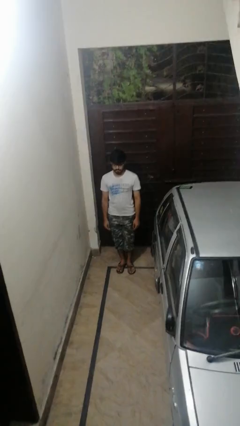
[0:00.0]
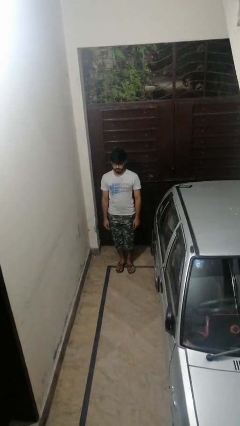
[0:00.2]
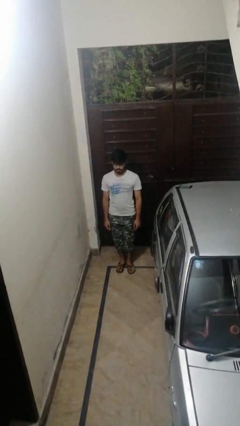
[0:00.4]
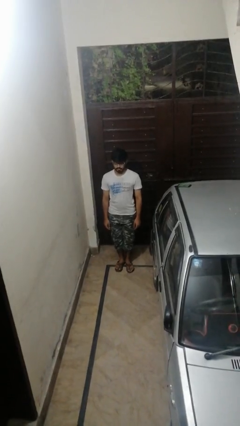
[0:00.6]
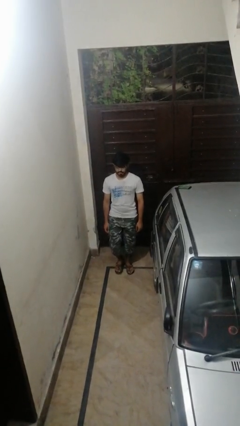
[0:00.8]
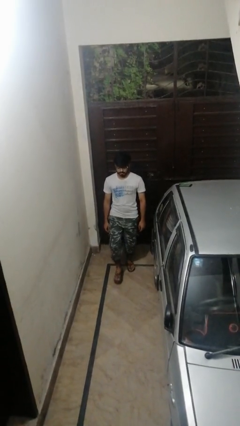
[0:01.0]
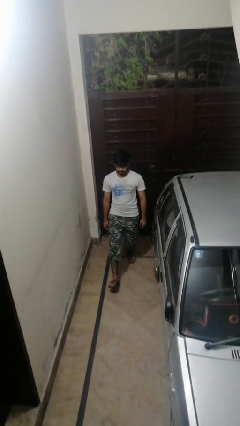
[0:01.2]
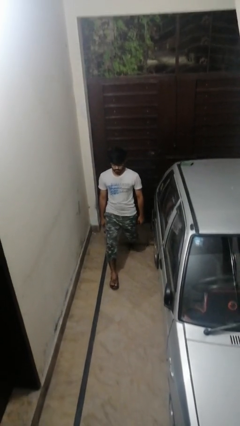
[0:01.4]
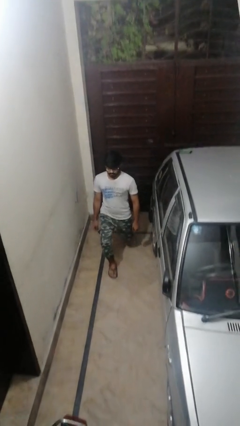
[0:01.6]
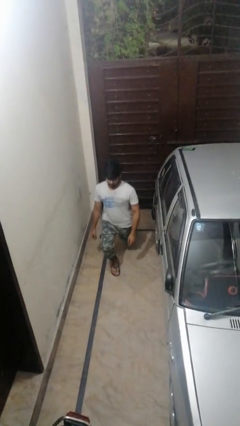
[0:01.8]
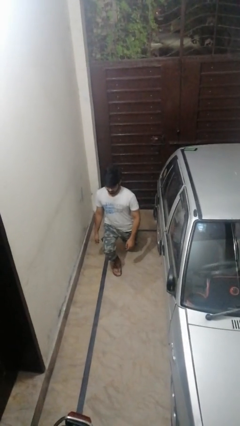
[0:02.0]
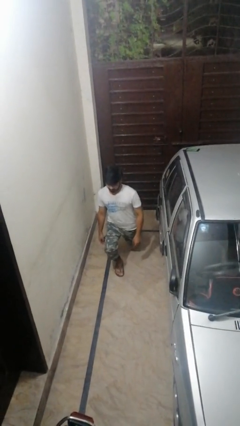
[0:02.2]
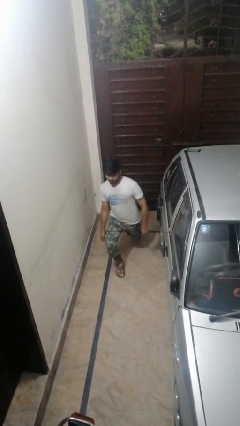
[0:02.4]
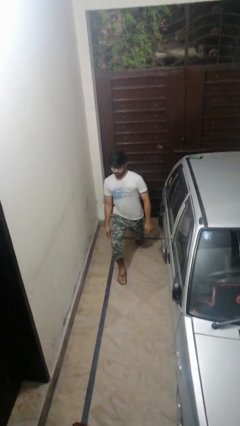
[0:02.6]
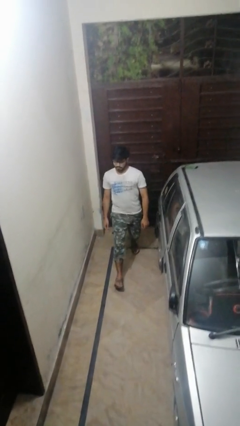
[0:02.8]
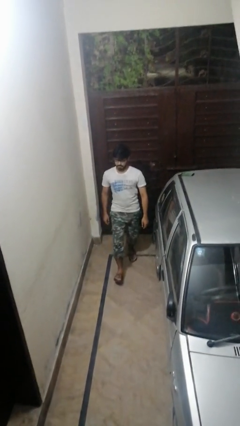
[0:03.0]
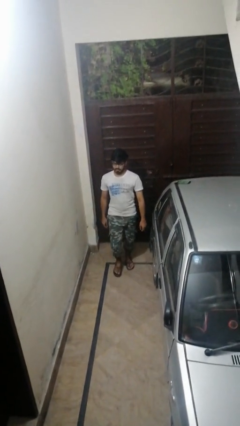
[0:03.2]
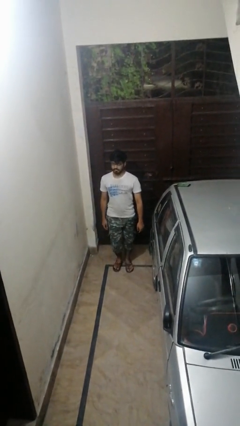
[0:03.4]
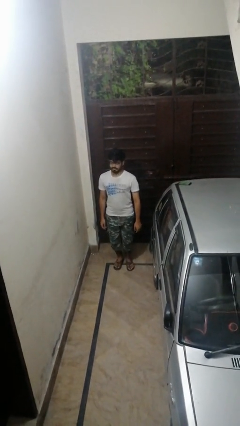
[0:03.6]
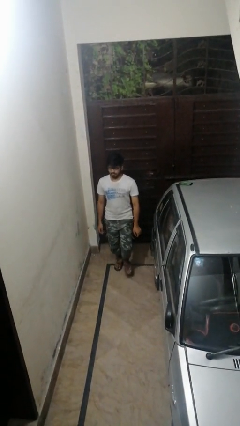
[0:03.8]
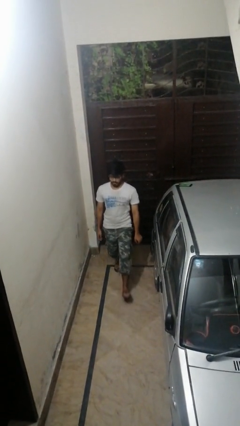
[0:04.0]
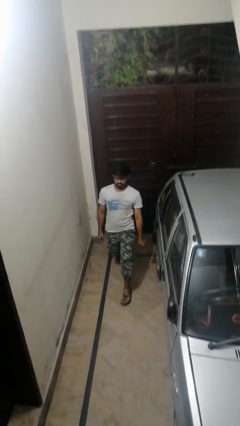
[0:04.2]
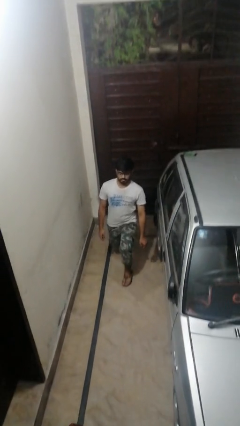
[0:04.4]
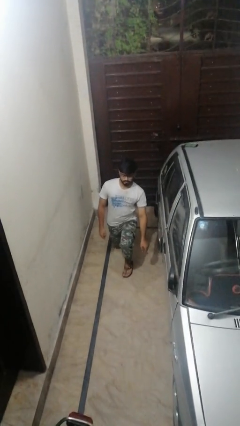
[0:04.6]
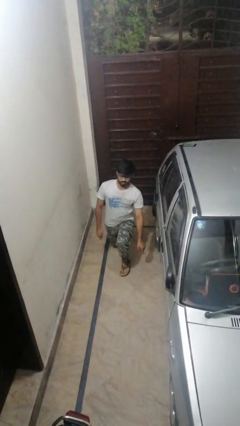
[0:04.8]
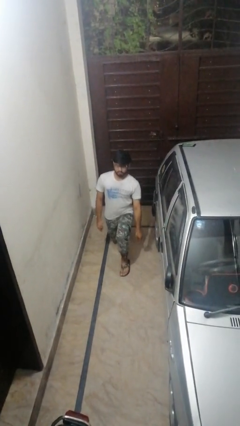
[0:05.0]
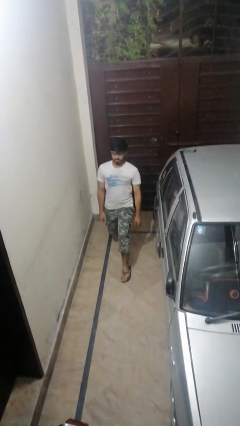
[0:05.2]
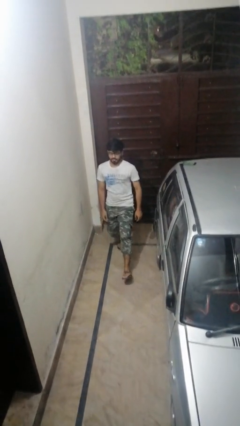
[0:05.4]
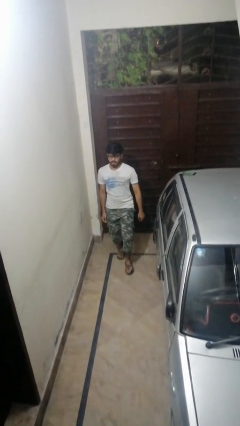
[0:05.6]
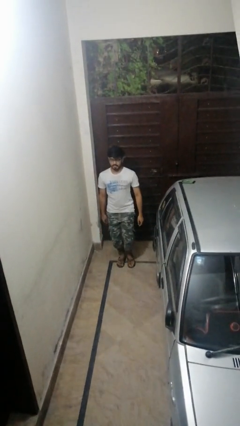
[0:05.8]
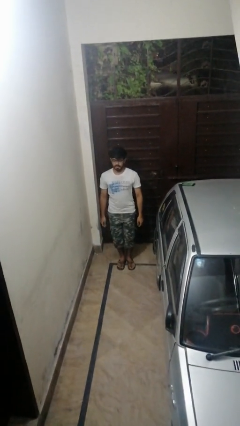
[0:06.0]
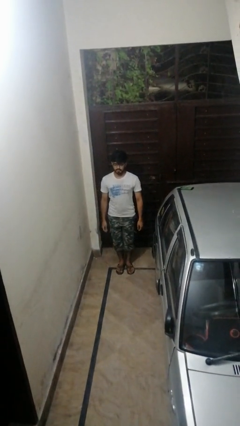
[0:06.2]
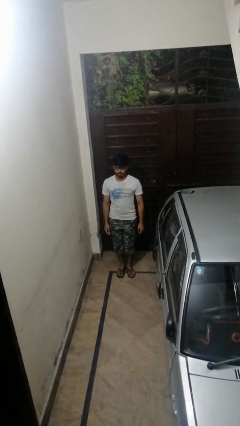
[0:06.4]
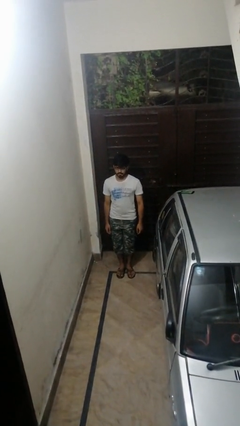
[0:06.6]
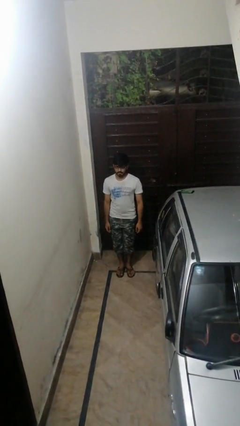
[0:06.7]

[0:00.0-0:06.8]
person exercises with lunges

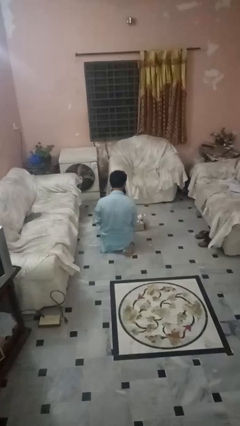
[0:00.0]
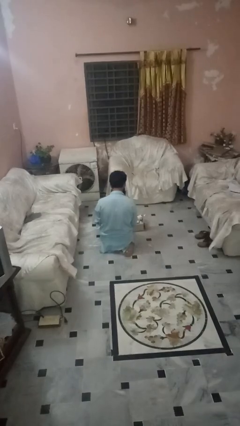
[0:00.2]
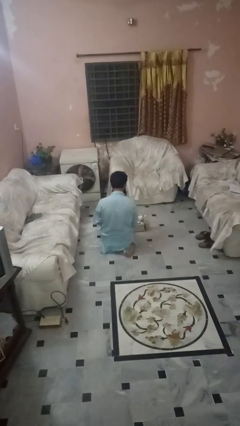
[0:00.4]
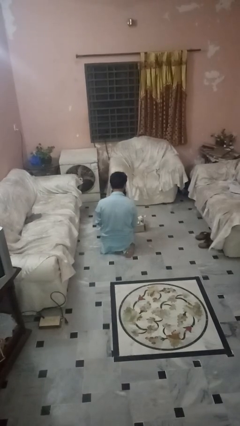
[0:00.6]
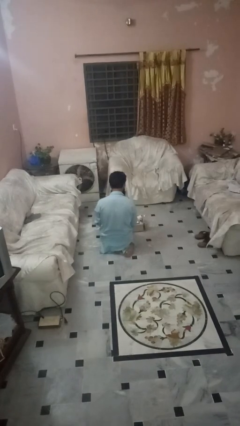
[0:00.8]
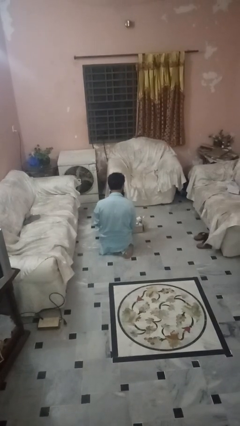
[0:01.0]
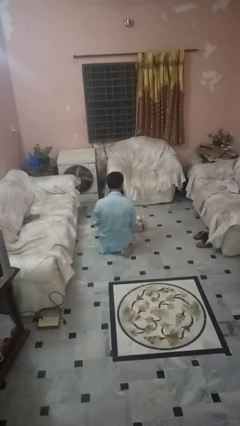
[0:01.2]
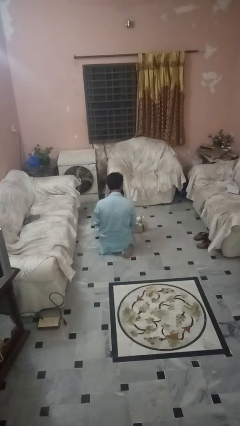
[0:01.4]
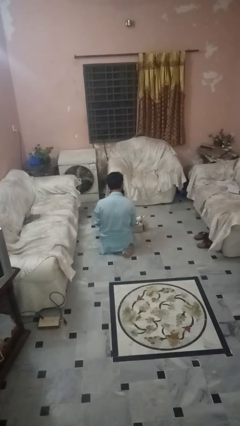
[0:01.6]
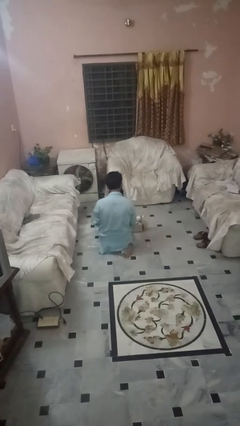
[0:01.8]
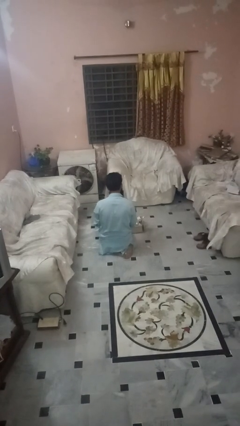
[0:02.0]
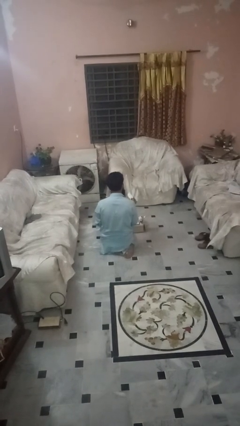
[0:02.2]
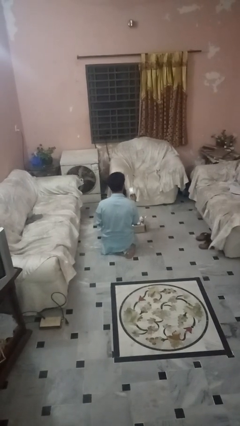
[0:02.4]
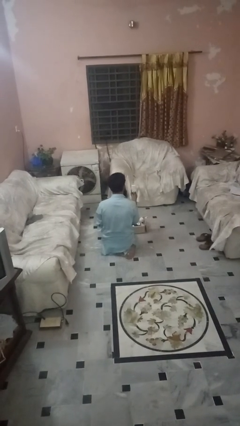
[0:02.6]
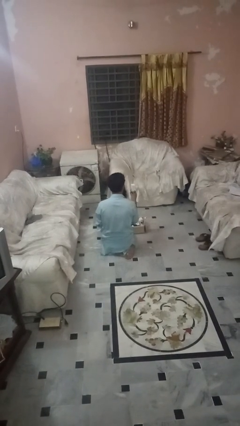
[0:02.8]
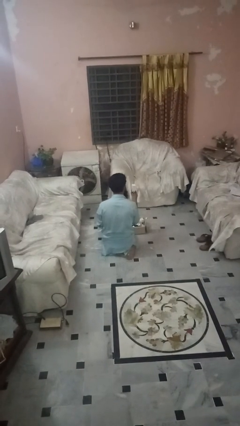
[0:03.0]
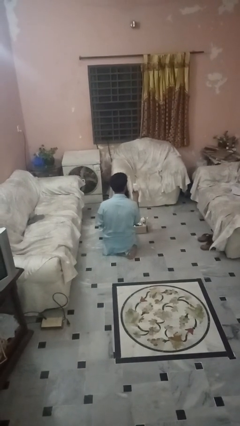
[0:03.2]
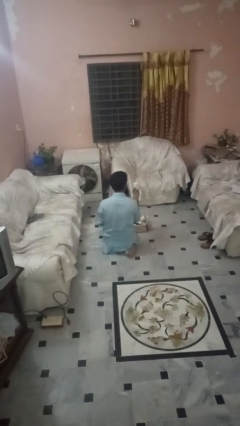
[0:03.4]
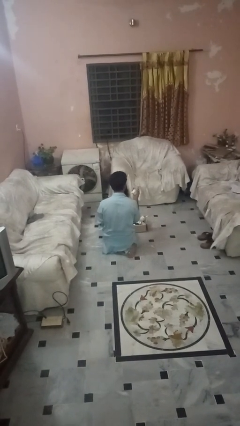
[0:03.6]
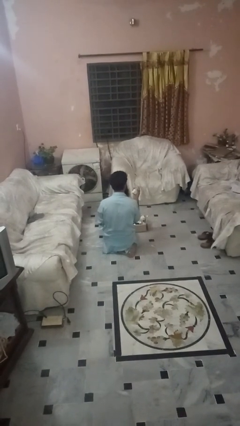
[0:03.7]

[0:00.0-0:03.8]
person takes object from box

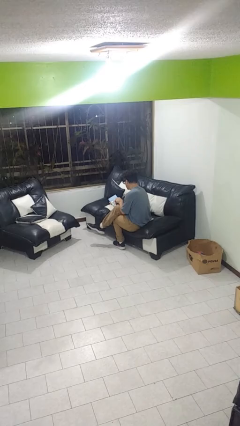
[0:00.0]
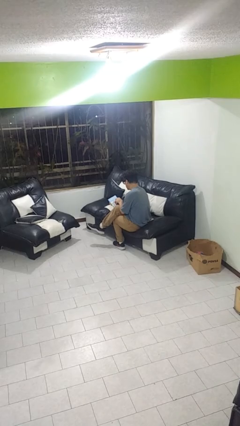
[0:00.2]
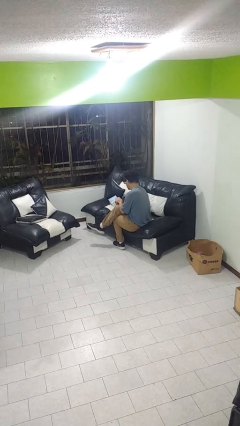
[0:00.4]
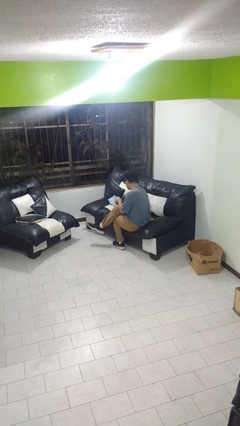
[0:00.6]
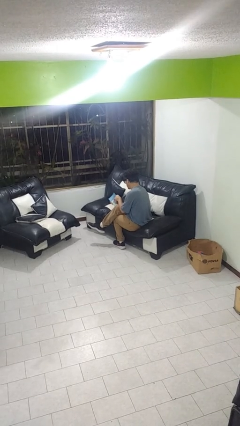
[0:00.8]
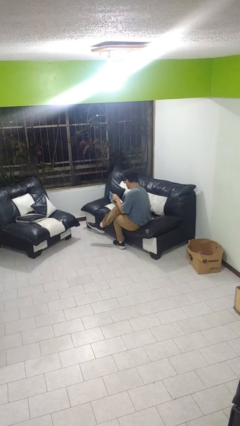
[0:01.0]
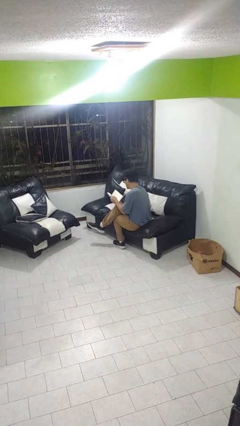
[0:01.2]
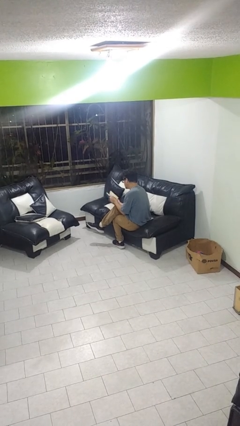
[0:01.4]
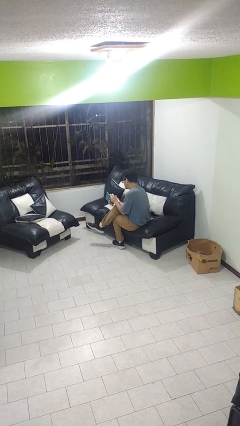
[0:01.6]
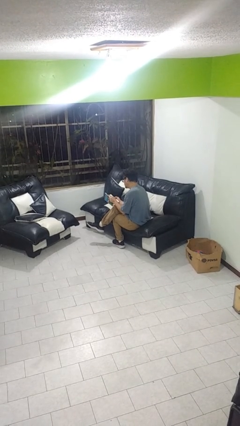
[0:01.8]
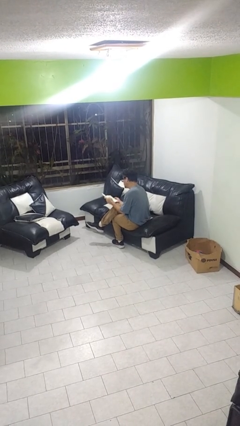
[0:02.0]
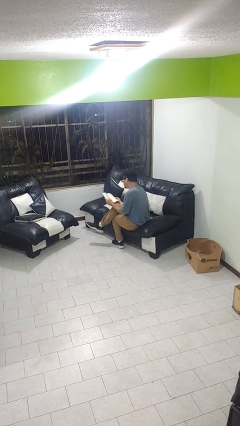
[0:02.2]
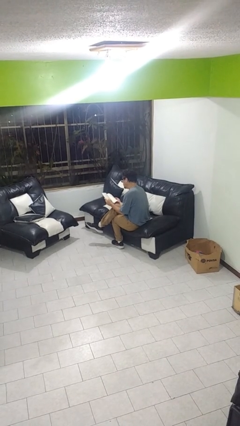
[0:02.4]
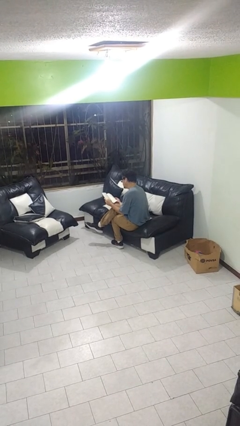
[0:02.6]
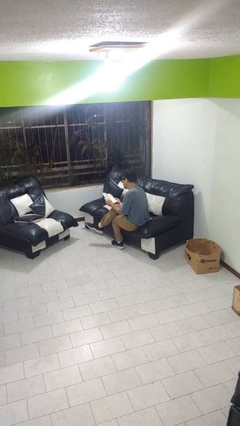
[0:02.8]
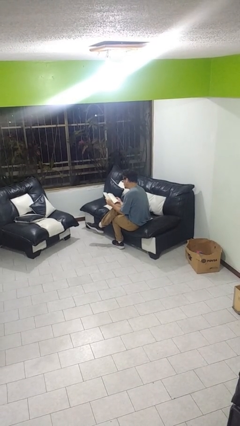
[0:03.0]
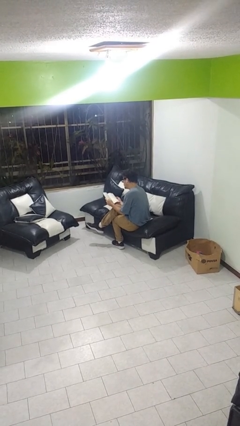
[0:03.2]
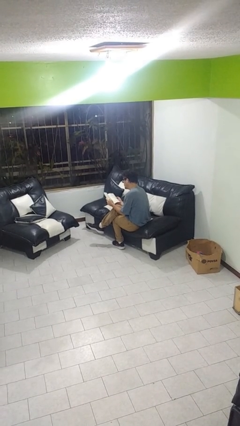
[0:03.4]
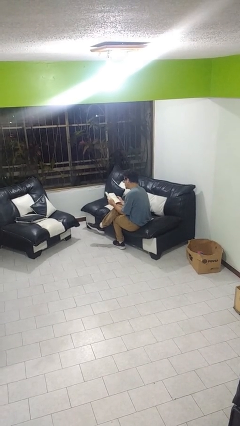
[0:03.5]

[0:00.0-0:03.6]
person reads book

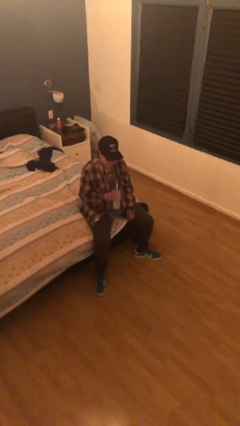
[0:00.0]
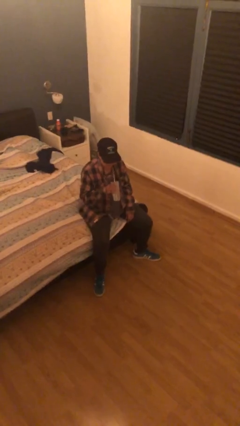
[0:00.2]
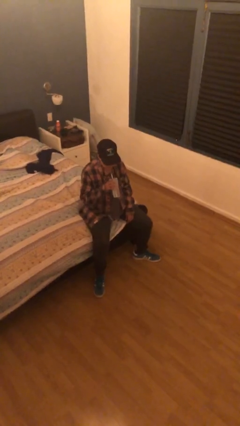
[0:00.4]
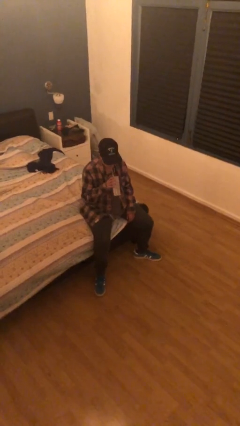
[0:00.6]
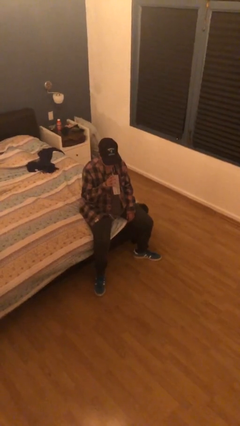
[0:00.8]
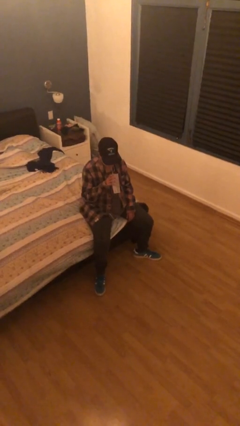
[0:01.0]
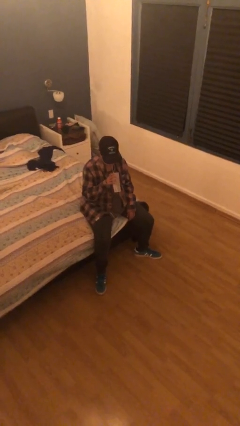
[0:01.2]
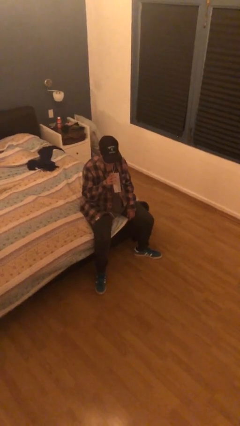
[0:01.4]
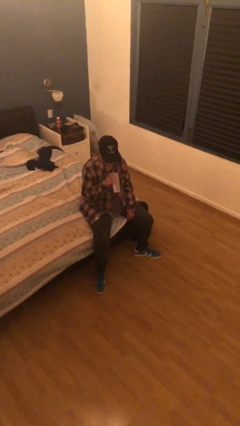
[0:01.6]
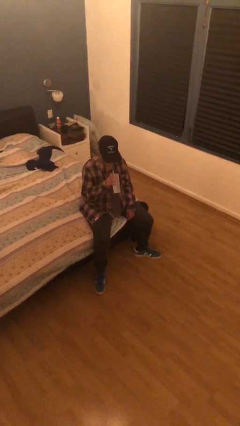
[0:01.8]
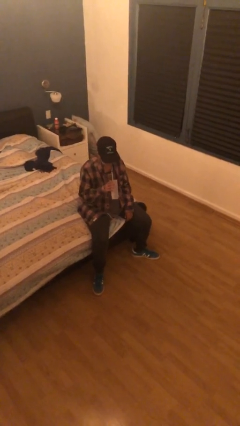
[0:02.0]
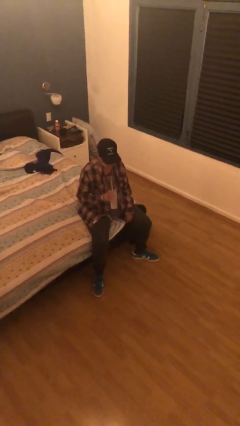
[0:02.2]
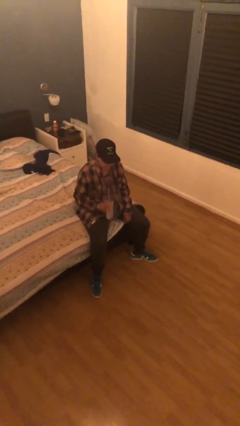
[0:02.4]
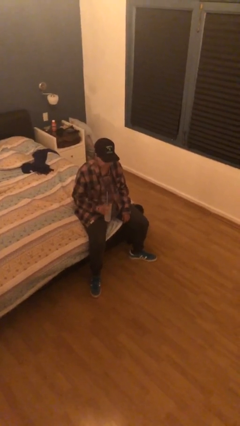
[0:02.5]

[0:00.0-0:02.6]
person drinks from straw

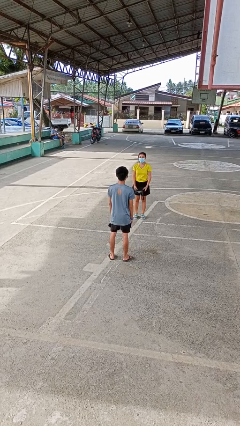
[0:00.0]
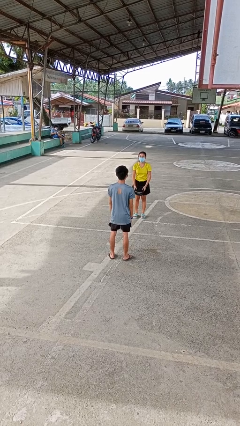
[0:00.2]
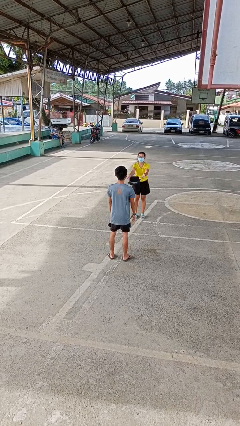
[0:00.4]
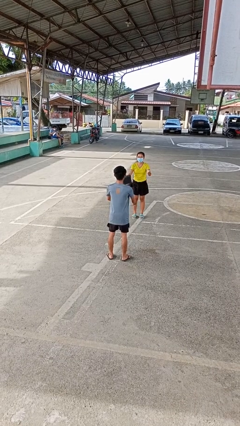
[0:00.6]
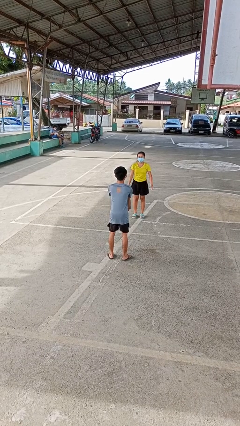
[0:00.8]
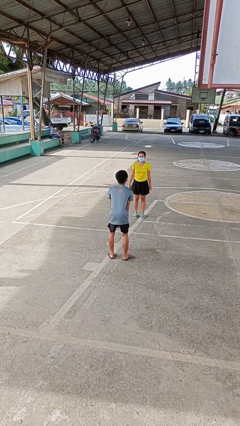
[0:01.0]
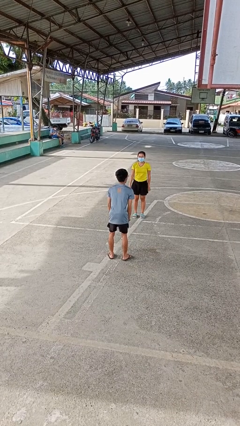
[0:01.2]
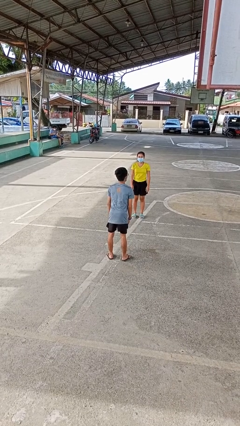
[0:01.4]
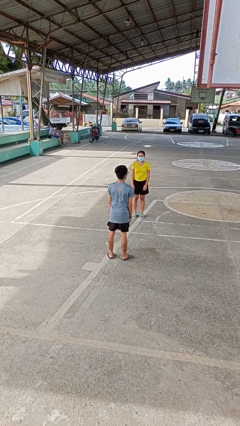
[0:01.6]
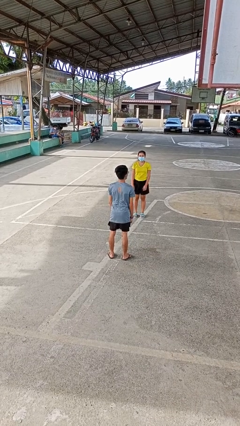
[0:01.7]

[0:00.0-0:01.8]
person catches object from person
